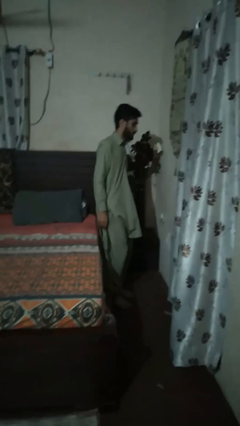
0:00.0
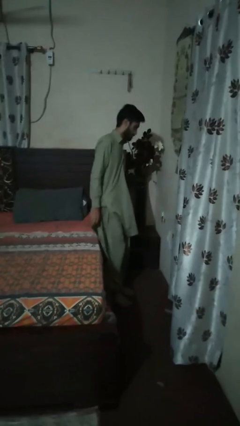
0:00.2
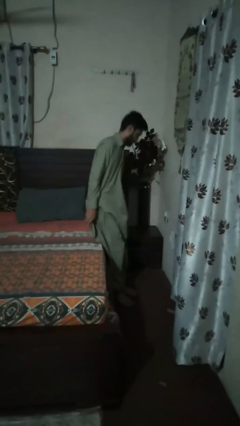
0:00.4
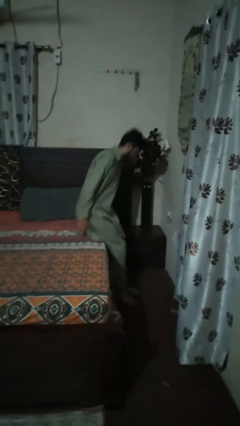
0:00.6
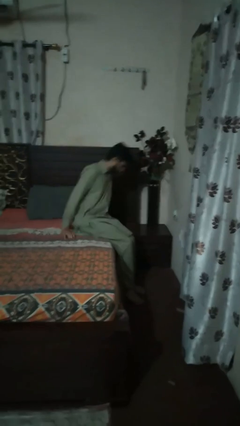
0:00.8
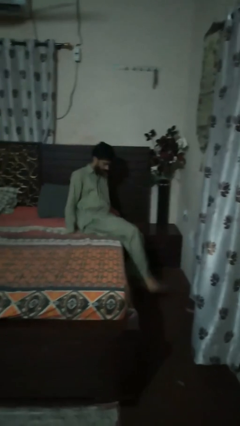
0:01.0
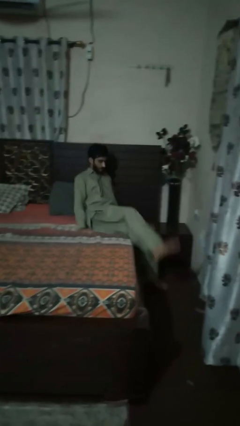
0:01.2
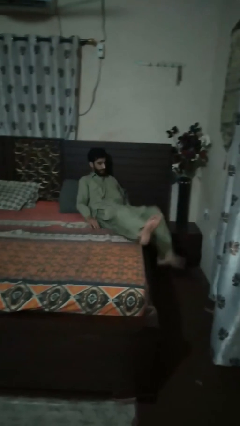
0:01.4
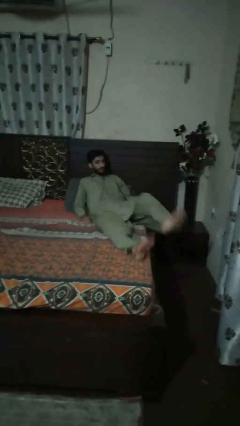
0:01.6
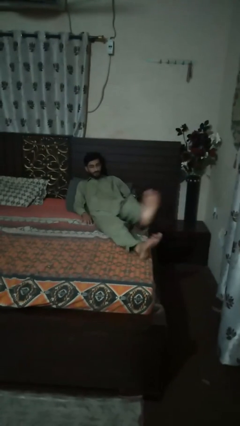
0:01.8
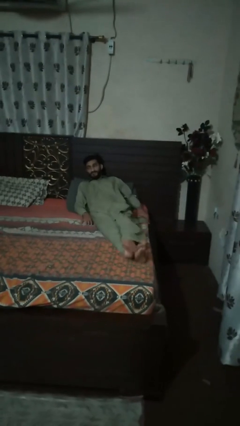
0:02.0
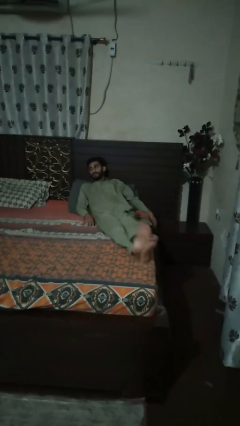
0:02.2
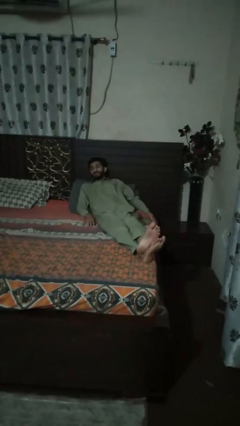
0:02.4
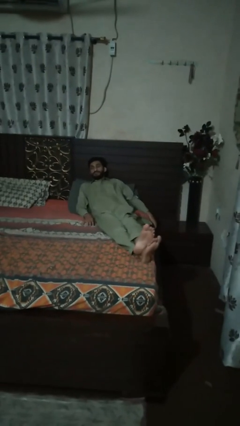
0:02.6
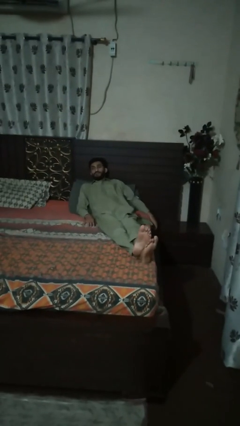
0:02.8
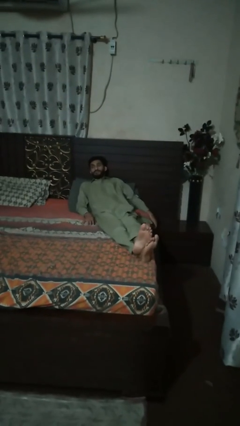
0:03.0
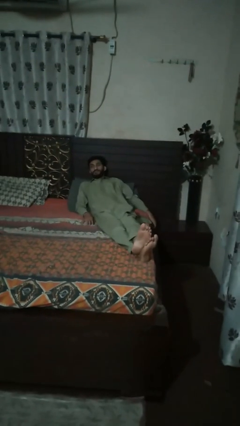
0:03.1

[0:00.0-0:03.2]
person lies down on bed

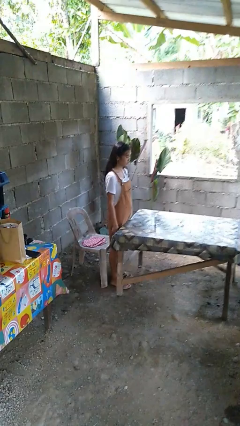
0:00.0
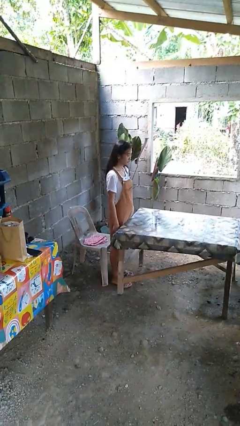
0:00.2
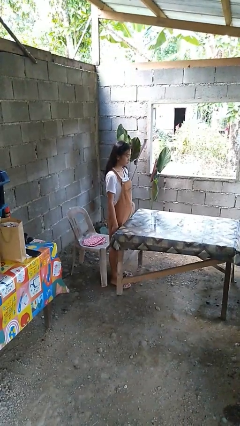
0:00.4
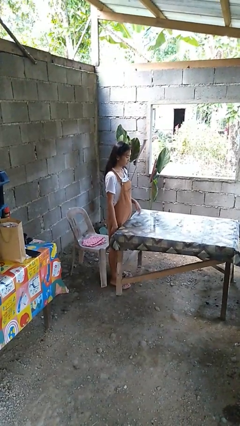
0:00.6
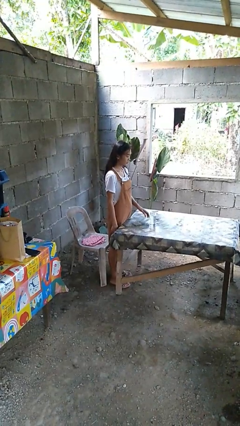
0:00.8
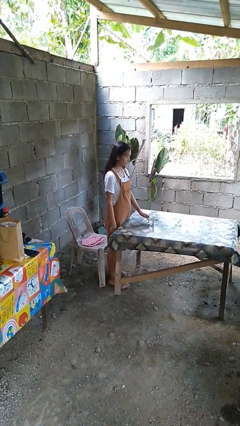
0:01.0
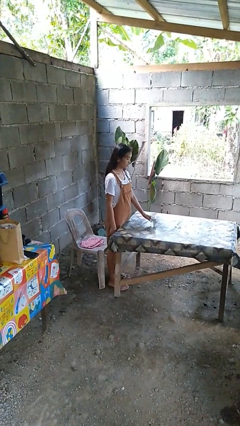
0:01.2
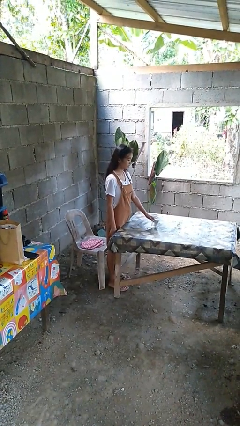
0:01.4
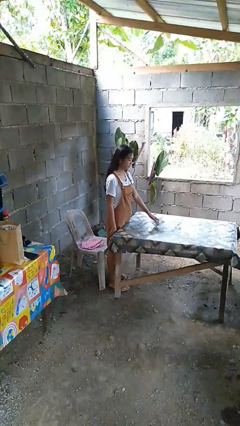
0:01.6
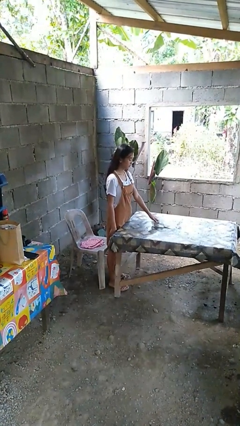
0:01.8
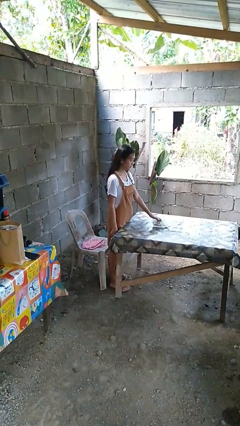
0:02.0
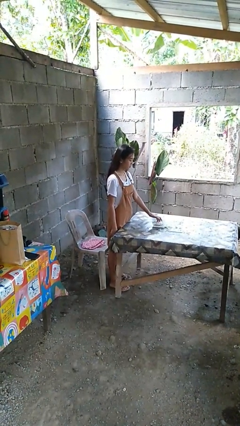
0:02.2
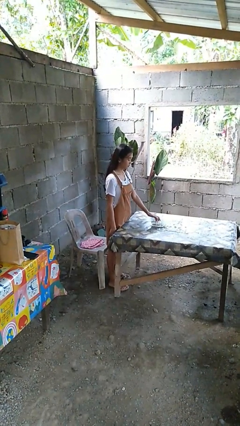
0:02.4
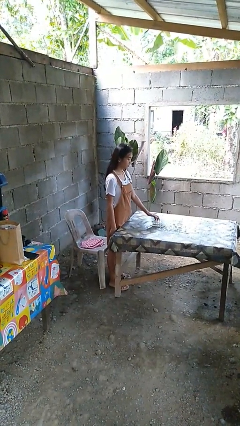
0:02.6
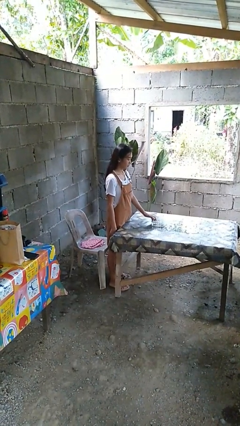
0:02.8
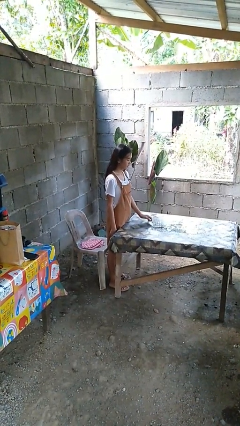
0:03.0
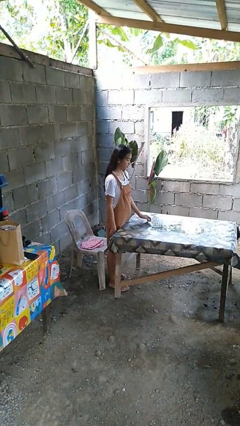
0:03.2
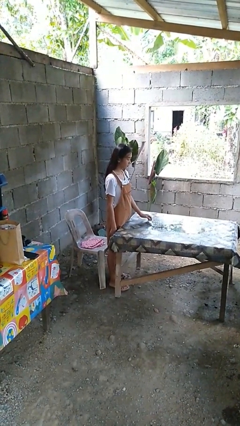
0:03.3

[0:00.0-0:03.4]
person spills on table

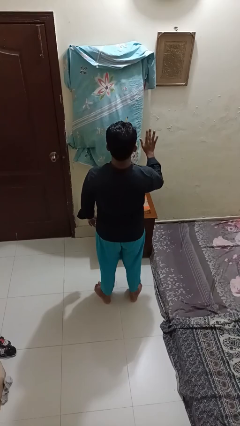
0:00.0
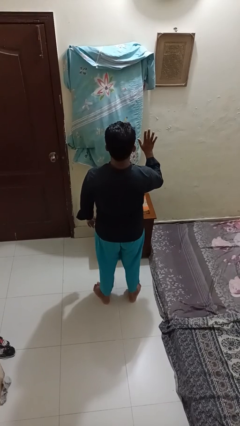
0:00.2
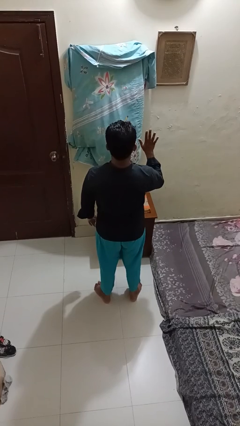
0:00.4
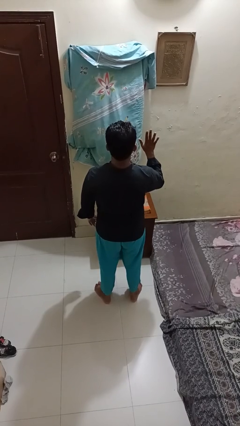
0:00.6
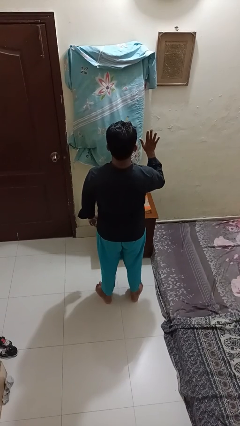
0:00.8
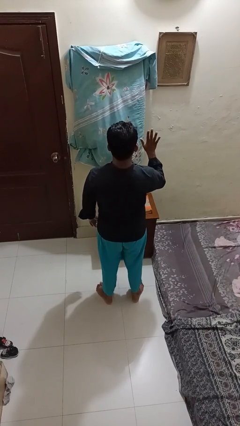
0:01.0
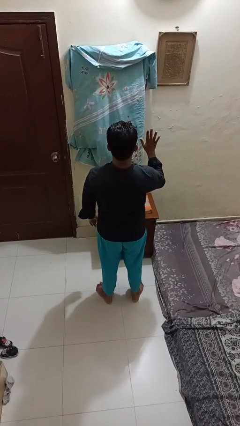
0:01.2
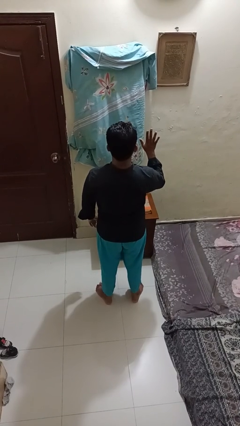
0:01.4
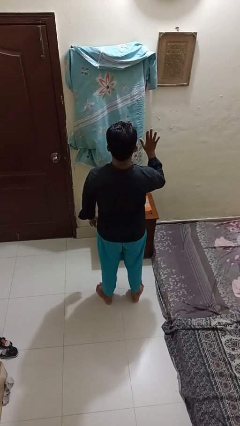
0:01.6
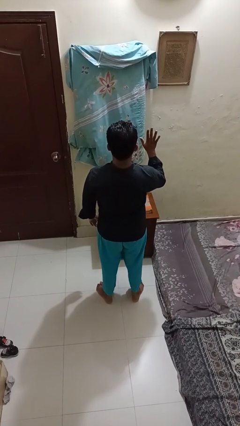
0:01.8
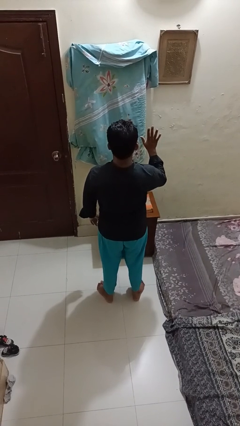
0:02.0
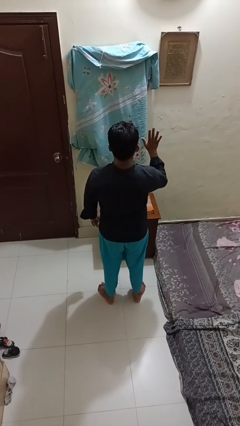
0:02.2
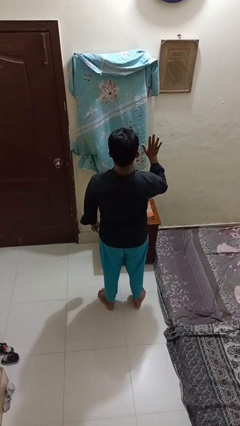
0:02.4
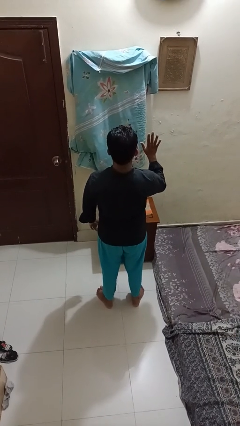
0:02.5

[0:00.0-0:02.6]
person gestures number five

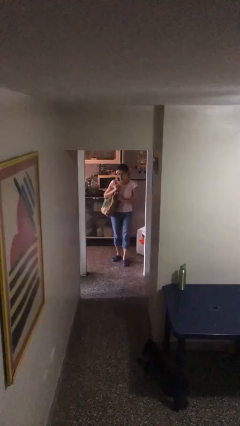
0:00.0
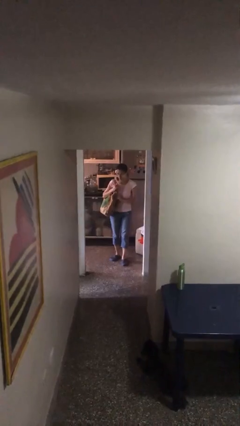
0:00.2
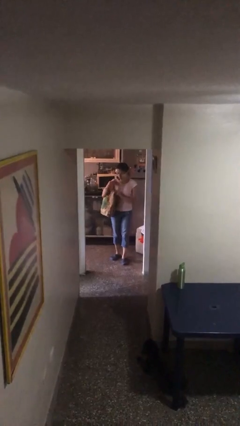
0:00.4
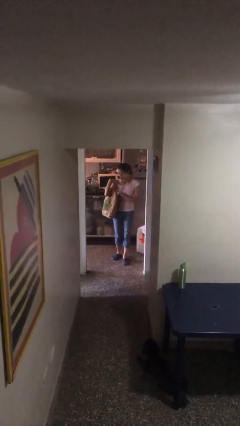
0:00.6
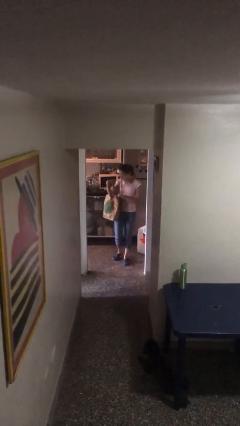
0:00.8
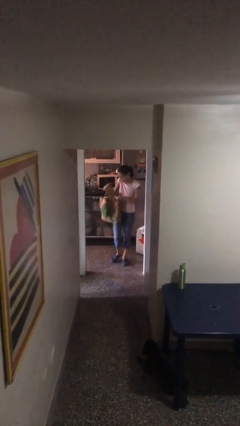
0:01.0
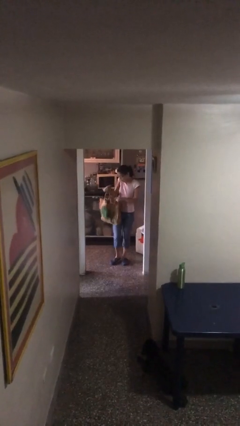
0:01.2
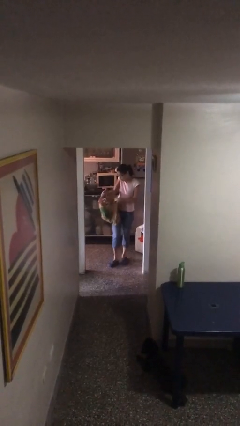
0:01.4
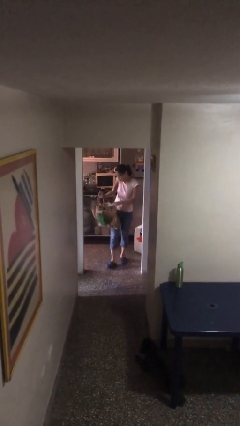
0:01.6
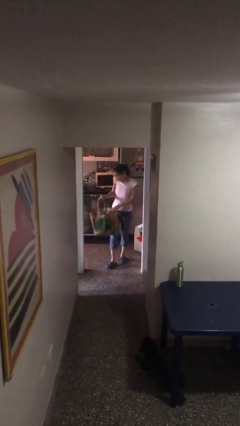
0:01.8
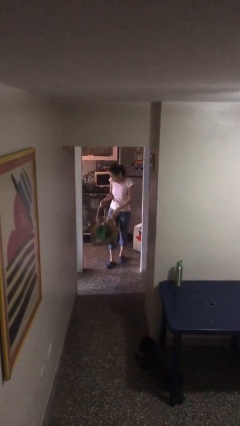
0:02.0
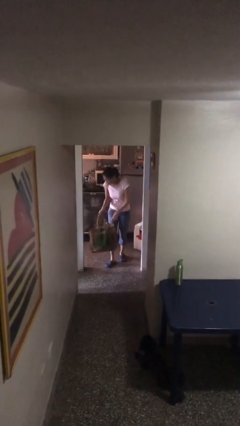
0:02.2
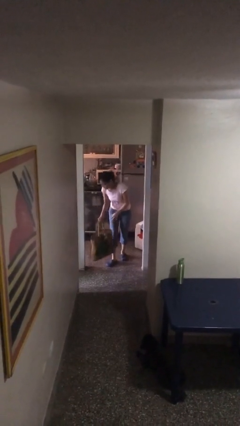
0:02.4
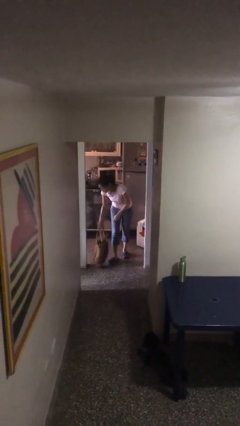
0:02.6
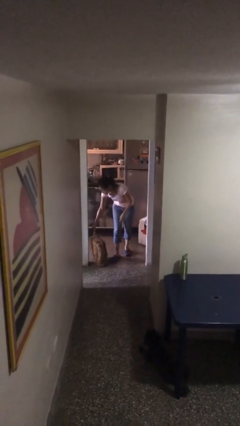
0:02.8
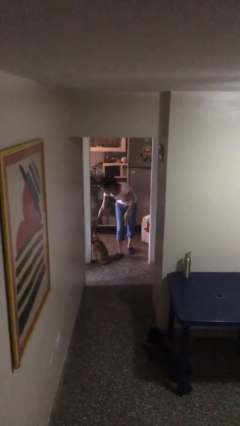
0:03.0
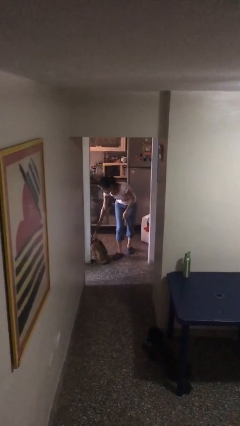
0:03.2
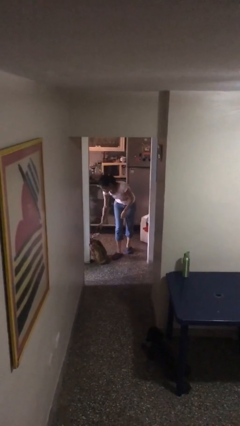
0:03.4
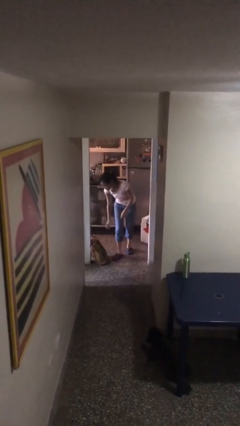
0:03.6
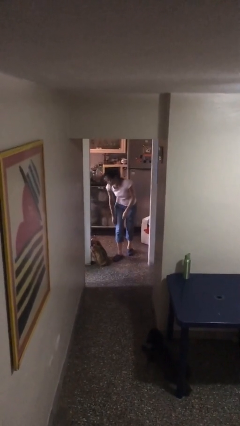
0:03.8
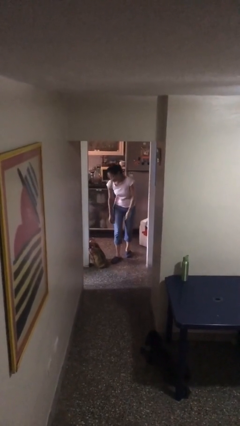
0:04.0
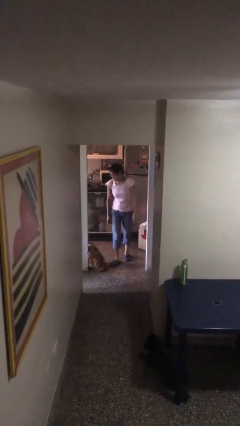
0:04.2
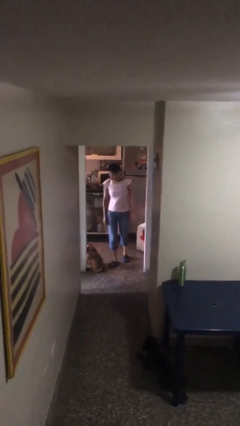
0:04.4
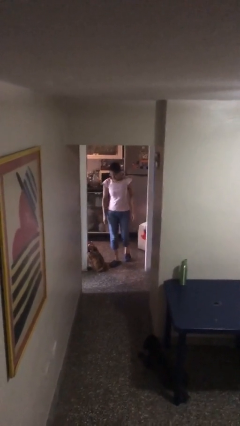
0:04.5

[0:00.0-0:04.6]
person puts down object on floor

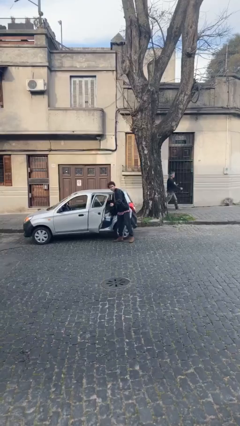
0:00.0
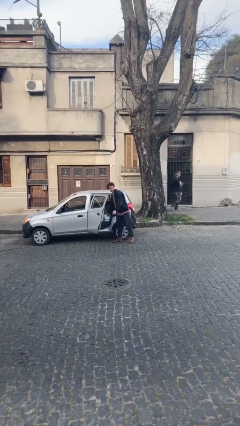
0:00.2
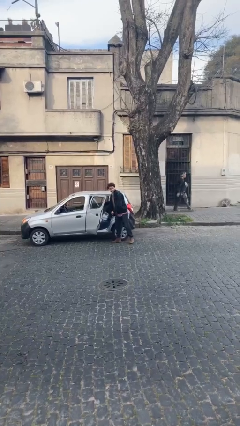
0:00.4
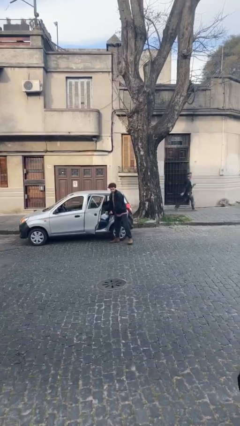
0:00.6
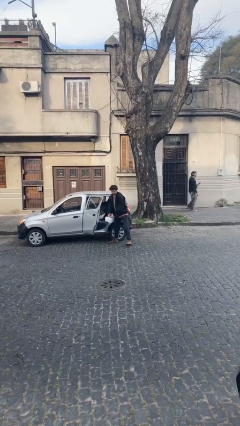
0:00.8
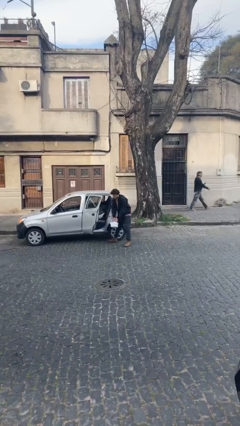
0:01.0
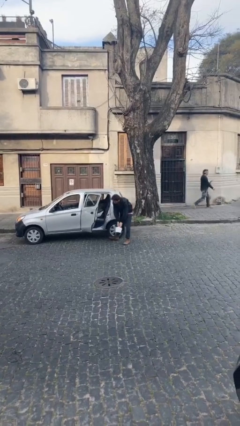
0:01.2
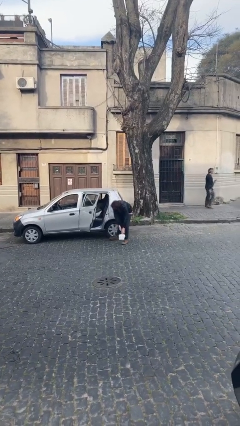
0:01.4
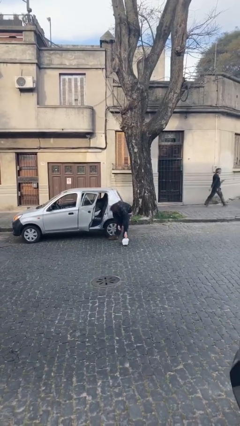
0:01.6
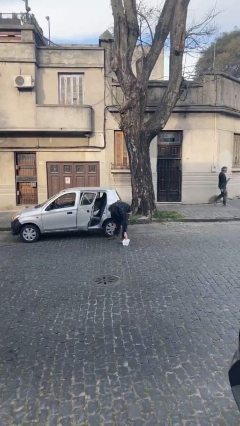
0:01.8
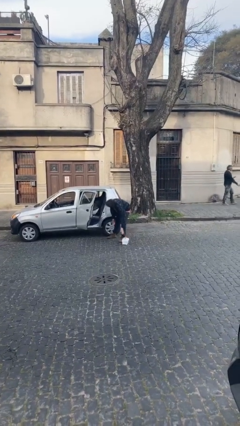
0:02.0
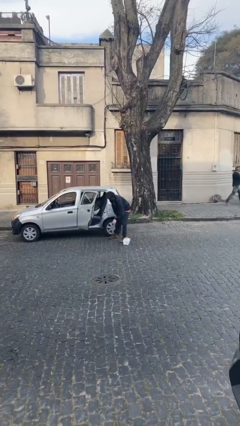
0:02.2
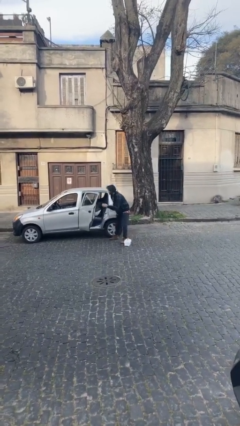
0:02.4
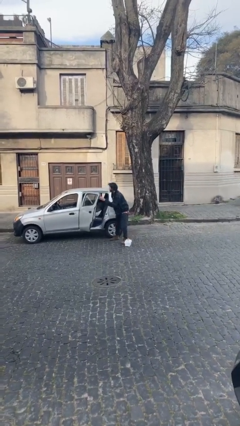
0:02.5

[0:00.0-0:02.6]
person unloads car

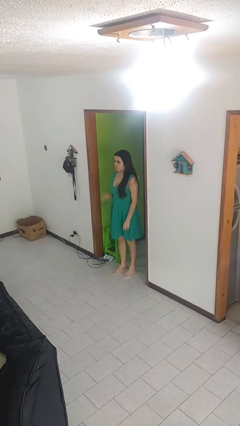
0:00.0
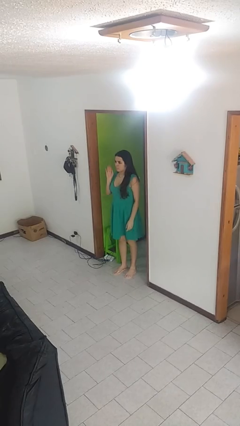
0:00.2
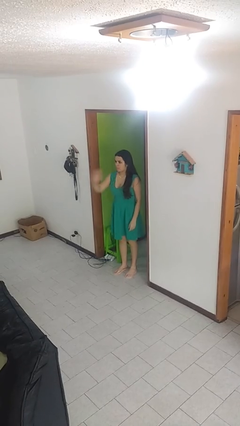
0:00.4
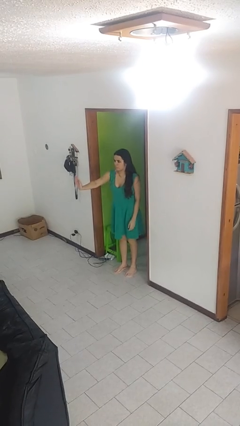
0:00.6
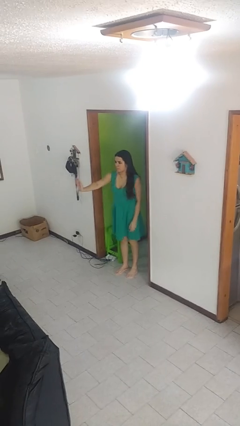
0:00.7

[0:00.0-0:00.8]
person gestures stop

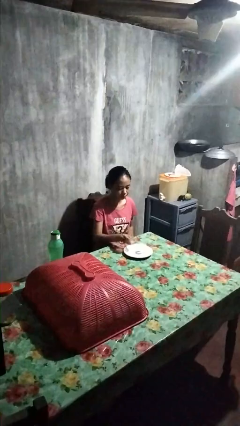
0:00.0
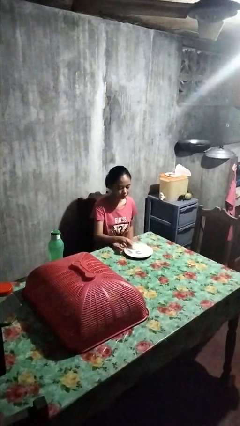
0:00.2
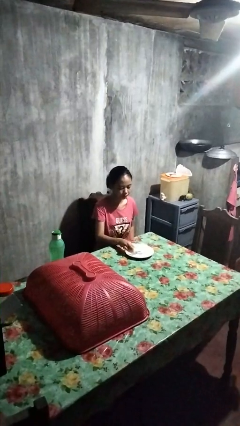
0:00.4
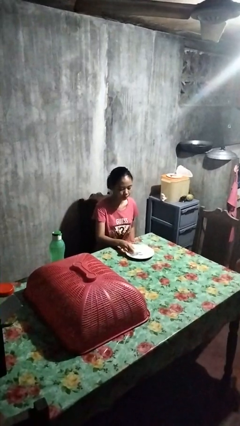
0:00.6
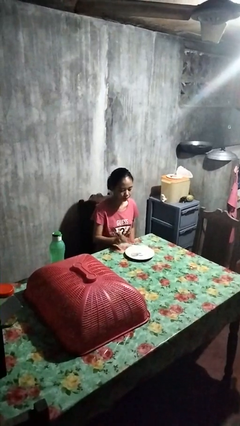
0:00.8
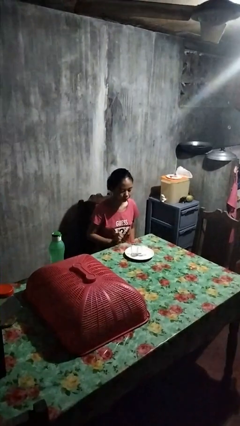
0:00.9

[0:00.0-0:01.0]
person puts down object on table
